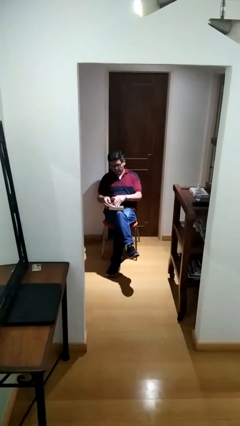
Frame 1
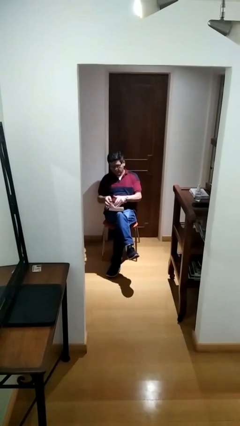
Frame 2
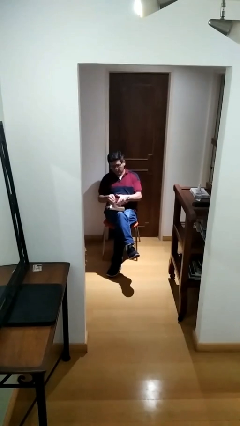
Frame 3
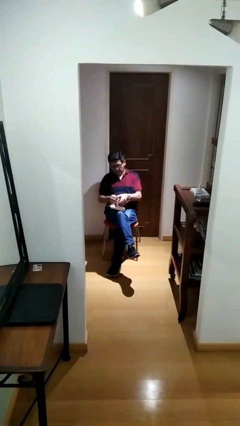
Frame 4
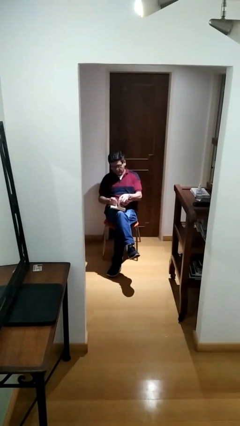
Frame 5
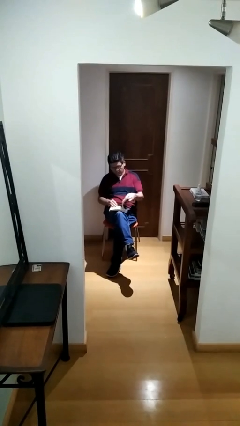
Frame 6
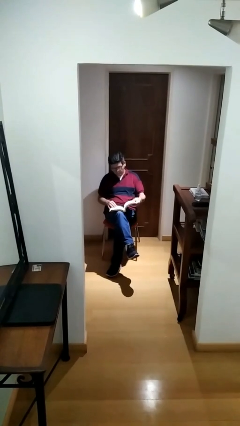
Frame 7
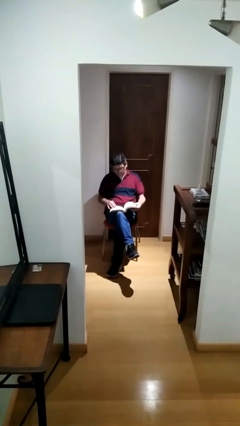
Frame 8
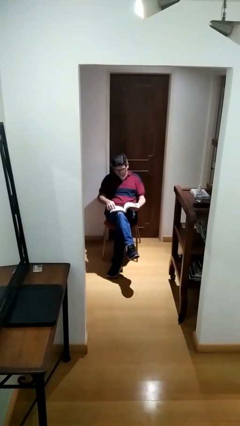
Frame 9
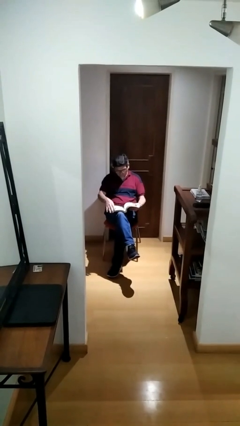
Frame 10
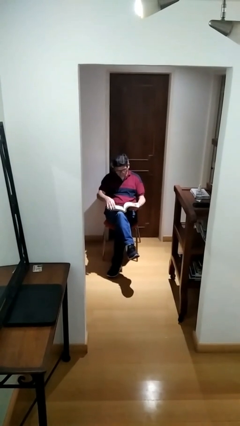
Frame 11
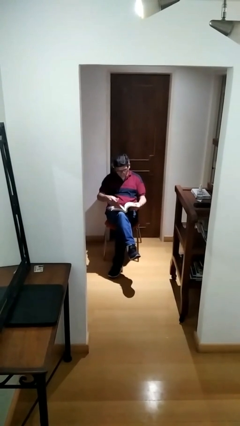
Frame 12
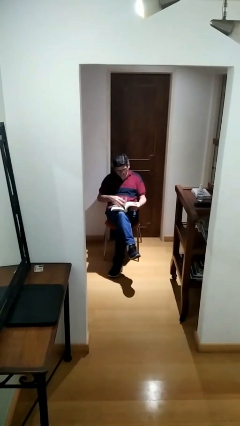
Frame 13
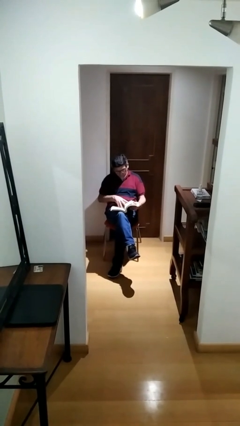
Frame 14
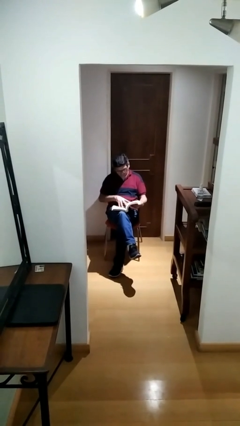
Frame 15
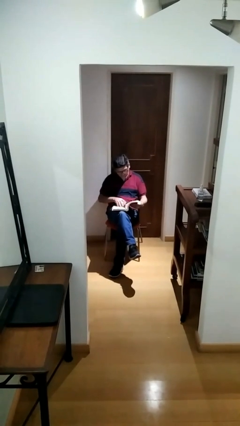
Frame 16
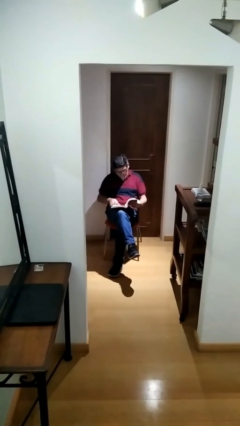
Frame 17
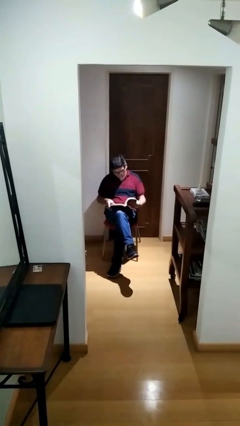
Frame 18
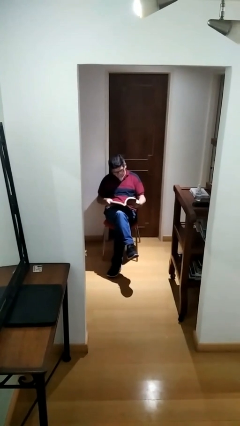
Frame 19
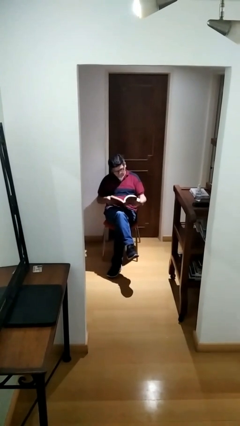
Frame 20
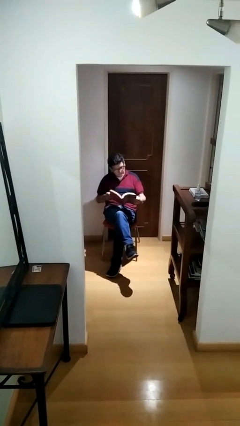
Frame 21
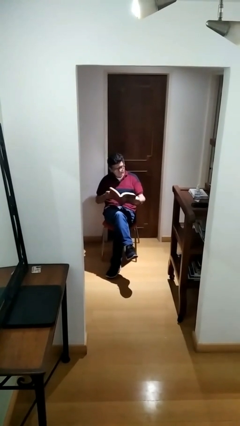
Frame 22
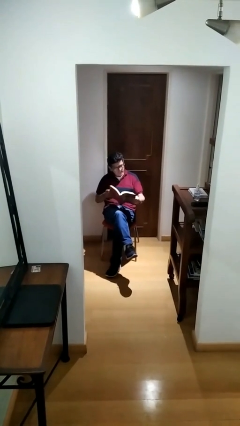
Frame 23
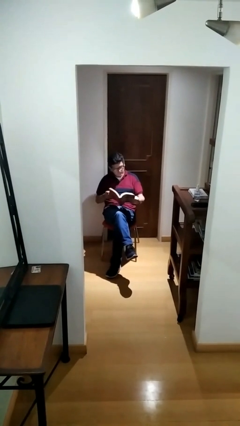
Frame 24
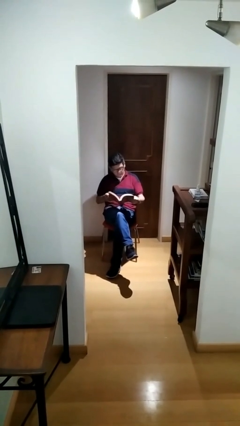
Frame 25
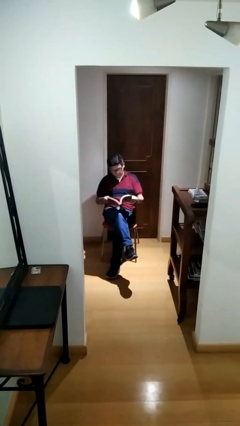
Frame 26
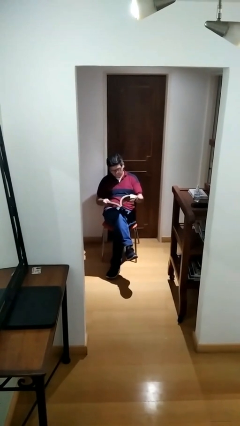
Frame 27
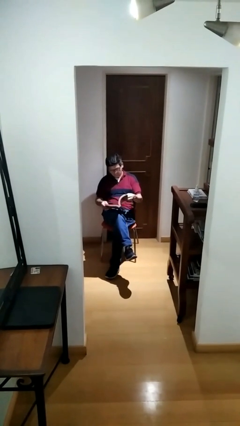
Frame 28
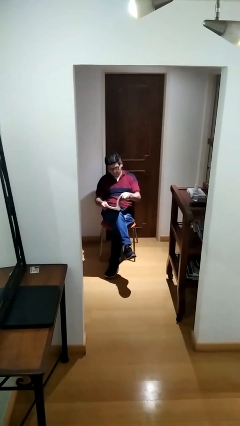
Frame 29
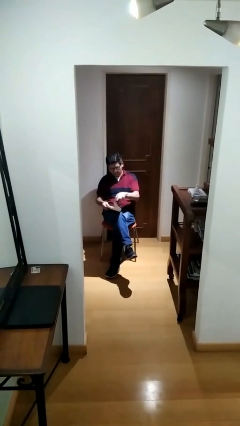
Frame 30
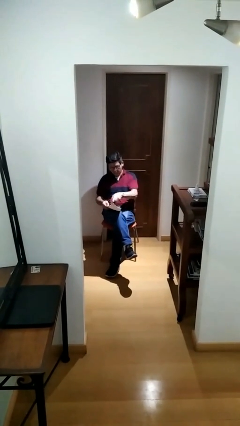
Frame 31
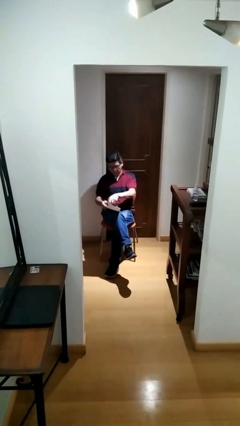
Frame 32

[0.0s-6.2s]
person reads document

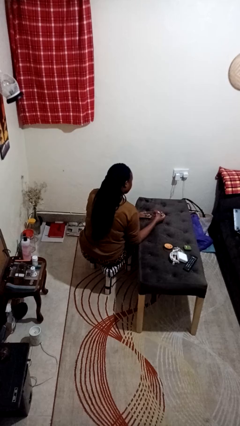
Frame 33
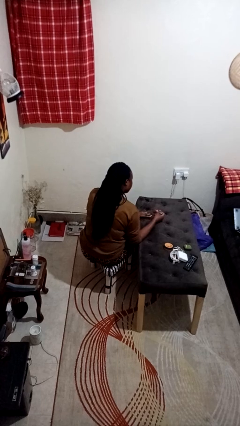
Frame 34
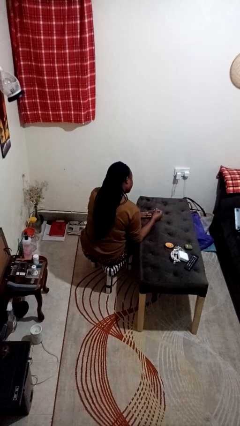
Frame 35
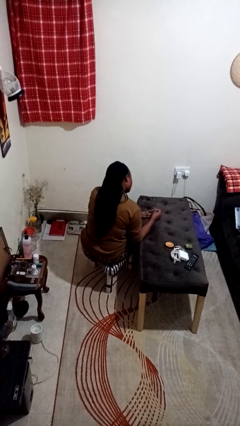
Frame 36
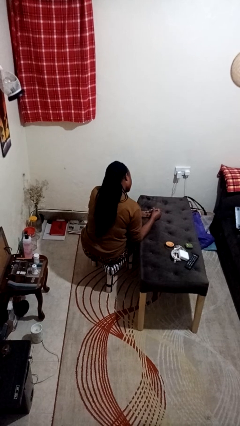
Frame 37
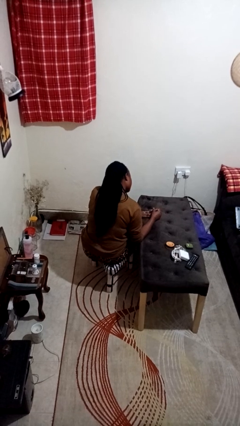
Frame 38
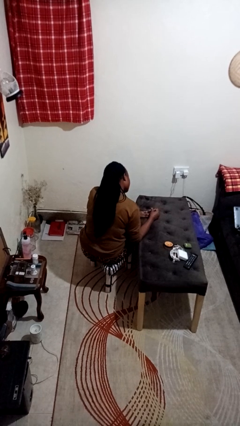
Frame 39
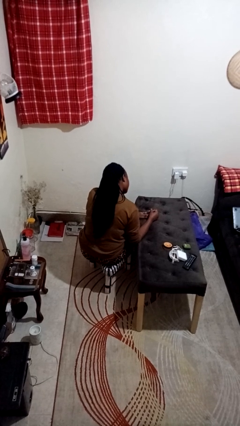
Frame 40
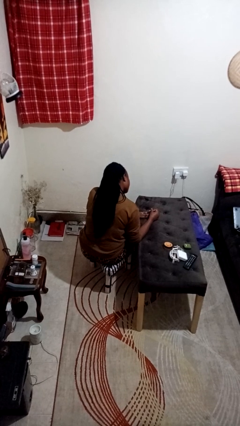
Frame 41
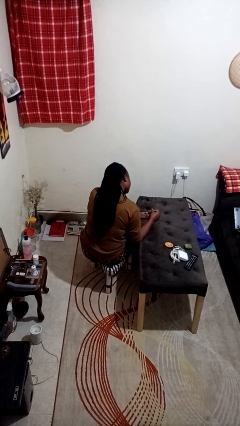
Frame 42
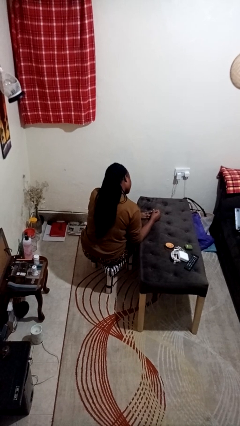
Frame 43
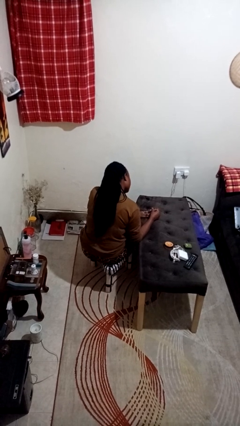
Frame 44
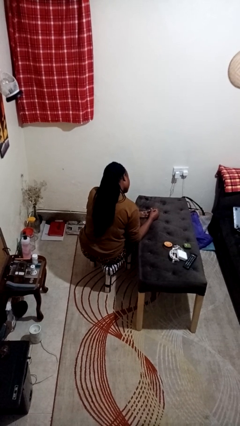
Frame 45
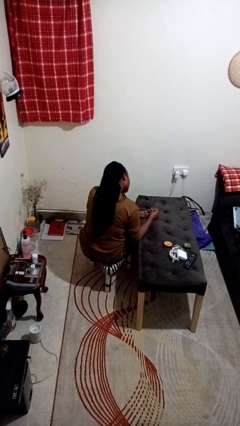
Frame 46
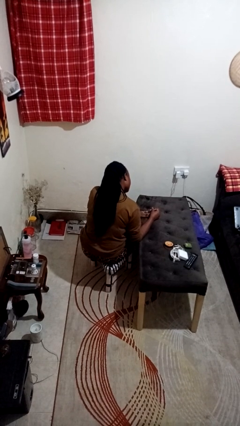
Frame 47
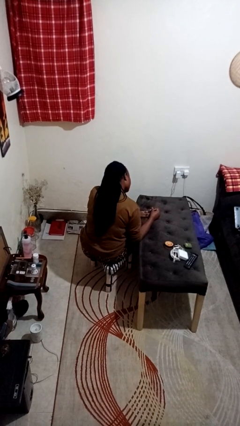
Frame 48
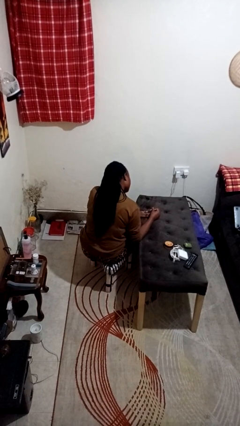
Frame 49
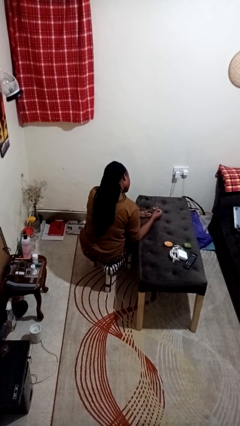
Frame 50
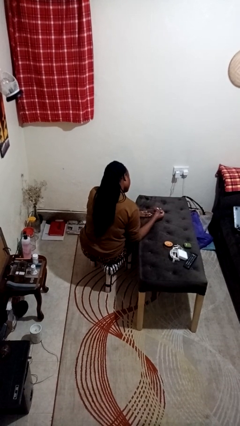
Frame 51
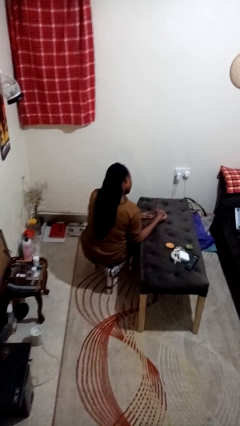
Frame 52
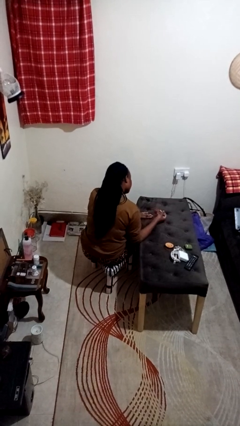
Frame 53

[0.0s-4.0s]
person paints fingernails

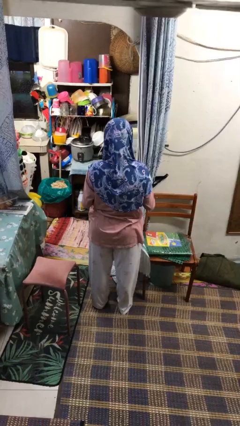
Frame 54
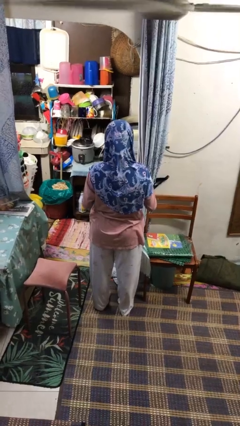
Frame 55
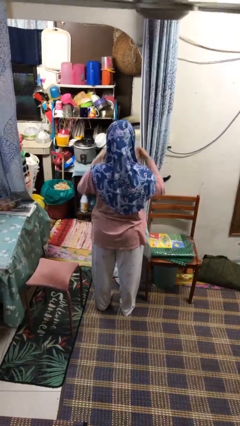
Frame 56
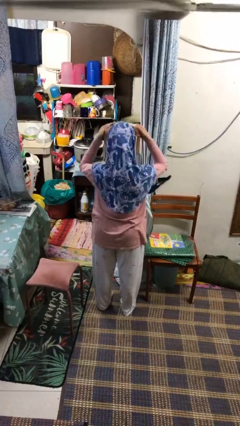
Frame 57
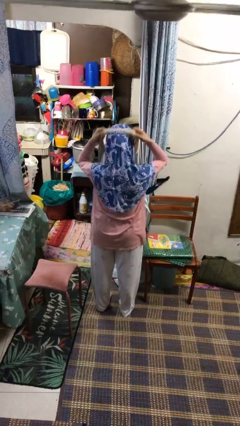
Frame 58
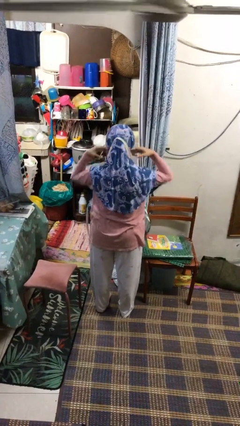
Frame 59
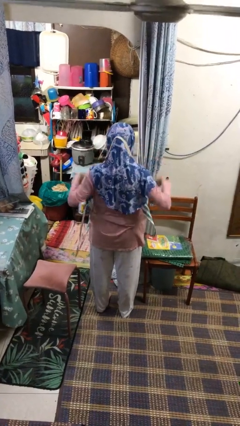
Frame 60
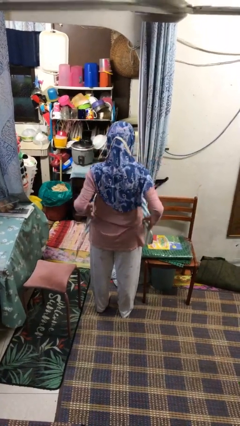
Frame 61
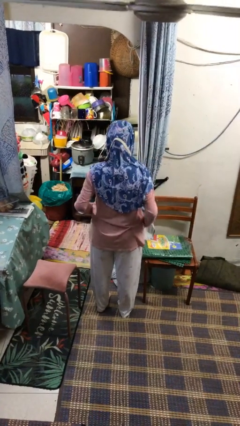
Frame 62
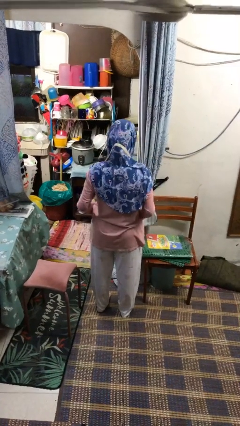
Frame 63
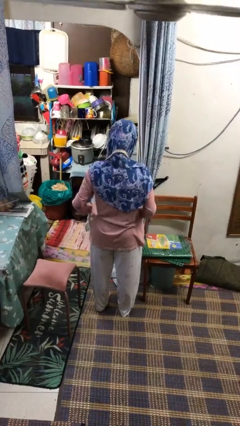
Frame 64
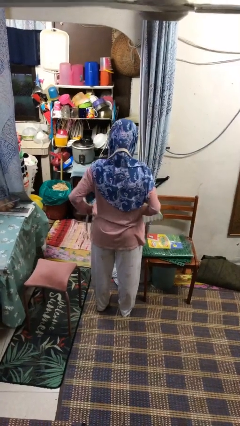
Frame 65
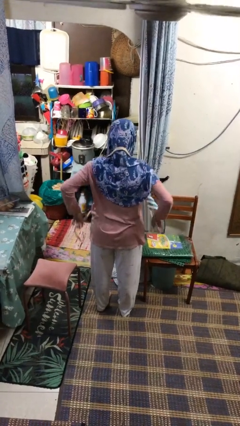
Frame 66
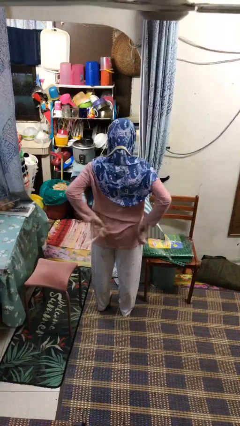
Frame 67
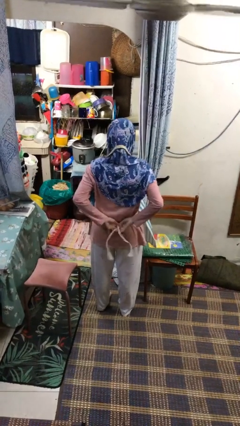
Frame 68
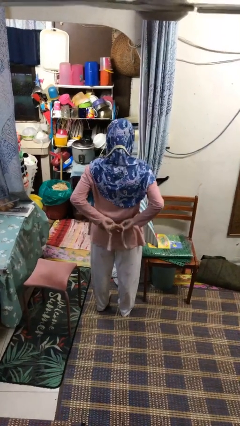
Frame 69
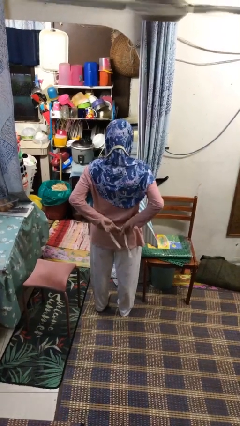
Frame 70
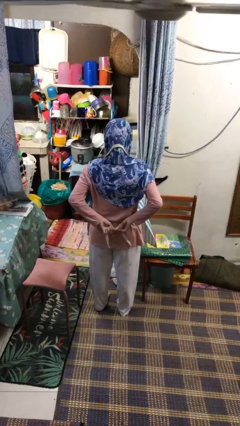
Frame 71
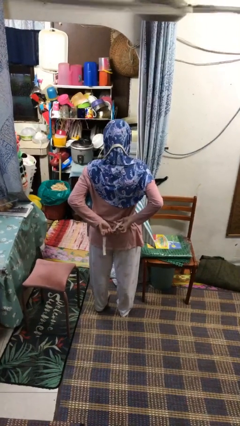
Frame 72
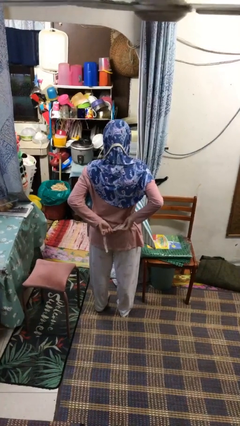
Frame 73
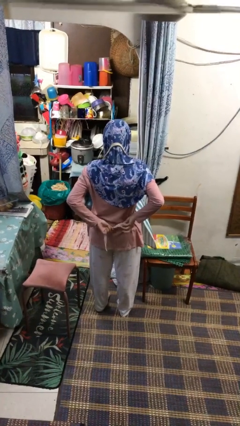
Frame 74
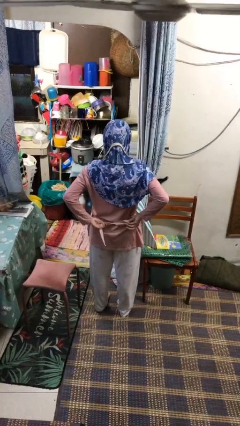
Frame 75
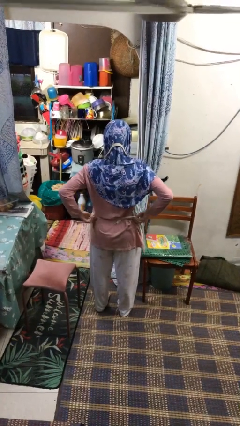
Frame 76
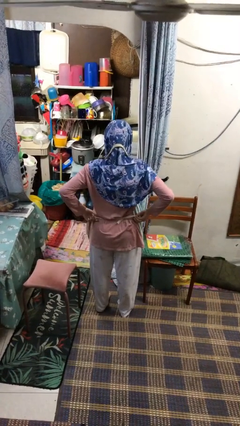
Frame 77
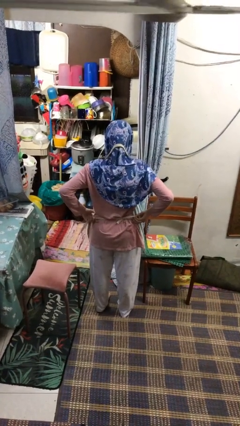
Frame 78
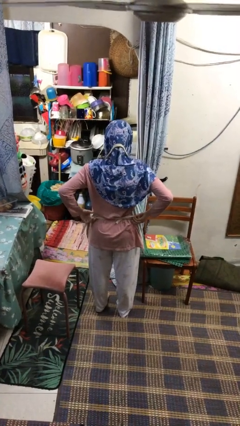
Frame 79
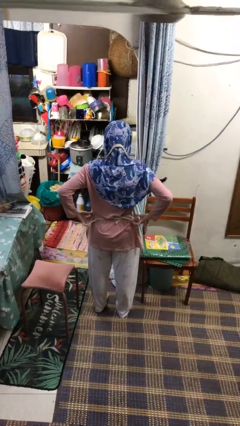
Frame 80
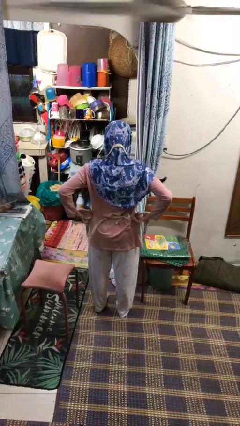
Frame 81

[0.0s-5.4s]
person puts on apron

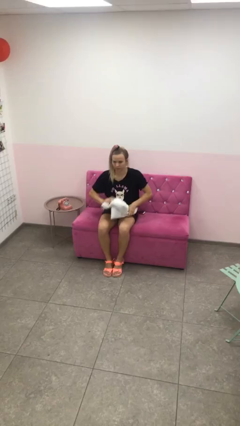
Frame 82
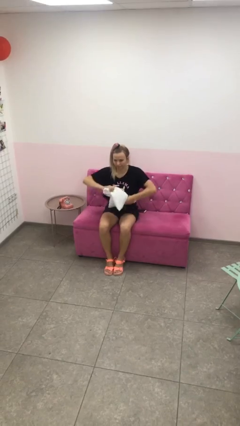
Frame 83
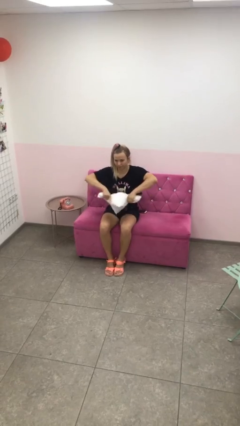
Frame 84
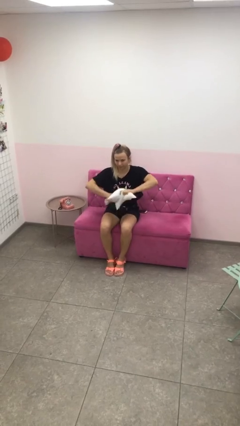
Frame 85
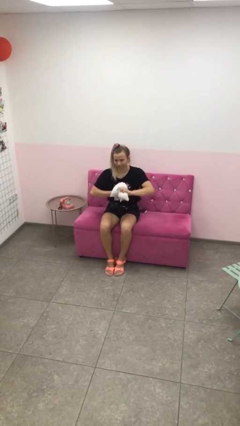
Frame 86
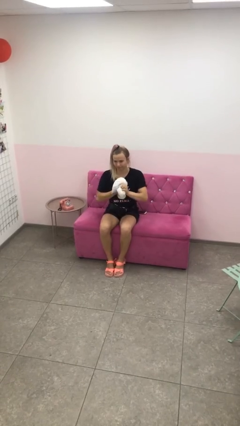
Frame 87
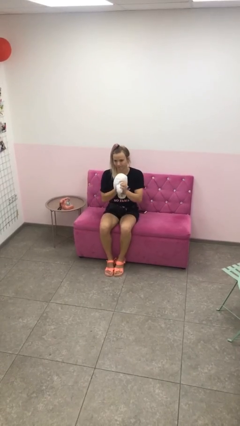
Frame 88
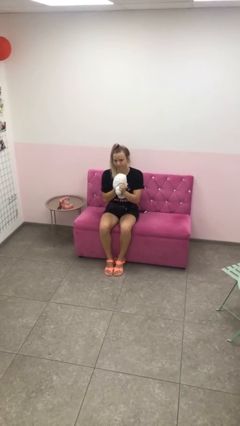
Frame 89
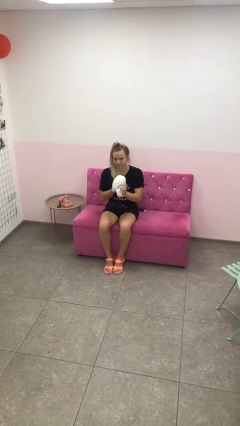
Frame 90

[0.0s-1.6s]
person squeezes object

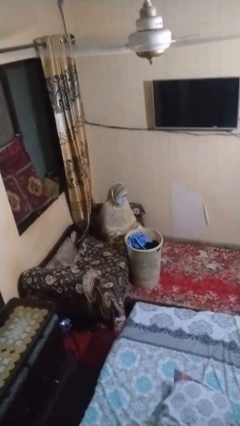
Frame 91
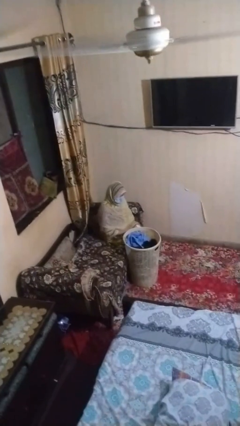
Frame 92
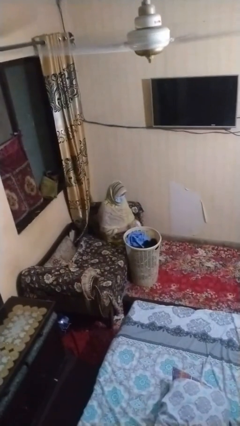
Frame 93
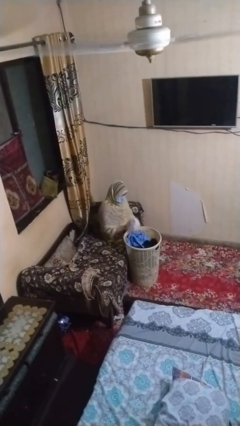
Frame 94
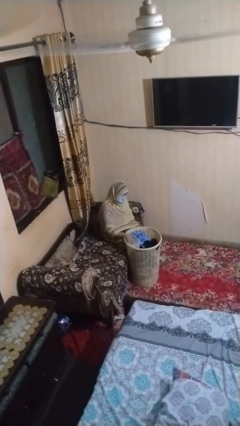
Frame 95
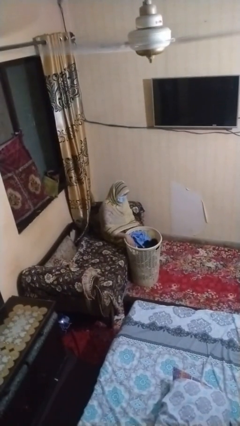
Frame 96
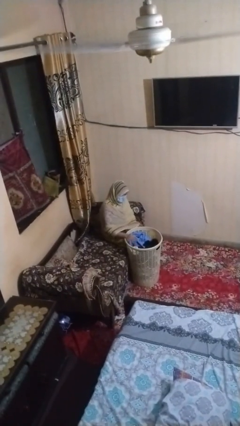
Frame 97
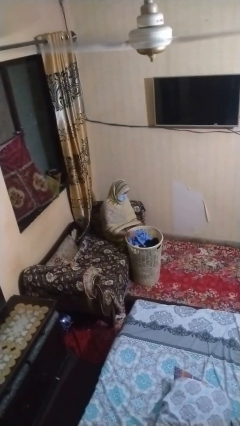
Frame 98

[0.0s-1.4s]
person puts object into basket
